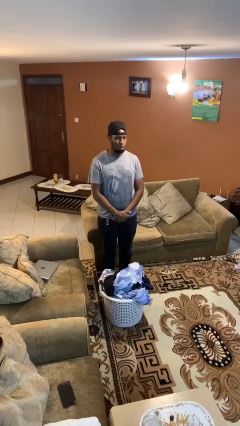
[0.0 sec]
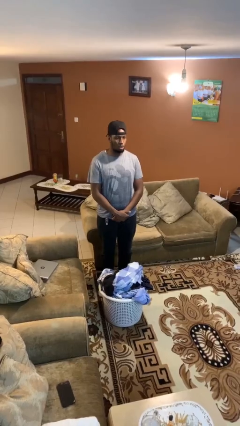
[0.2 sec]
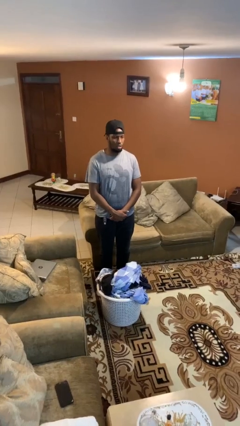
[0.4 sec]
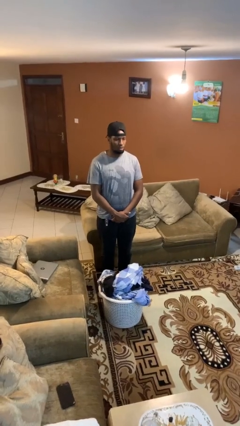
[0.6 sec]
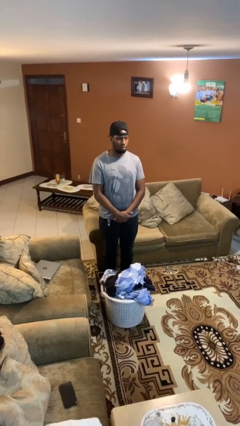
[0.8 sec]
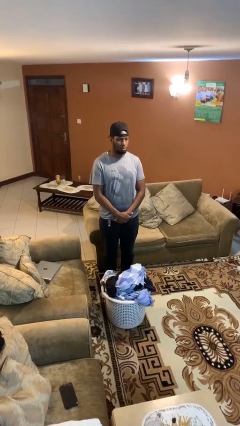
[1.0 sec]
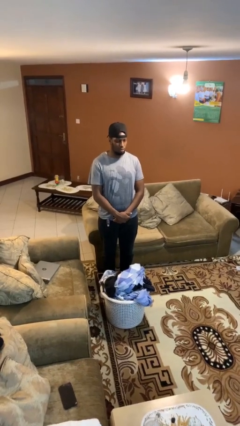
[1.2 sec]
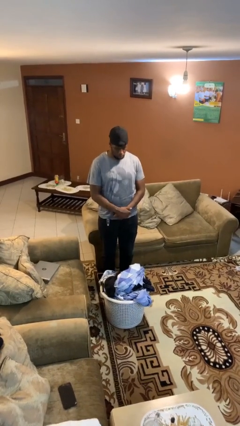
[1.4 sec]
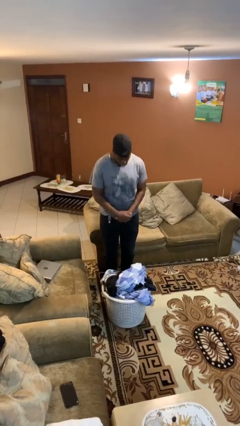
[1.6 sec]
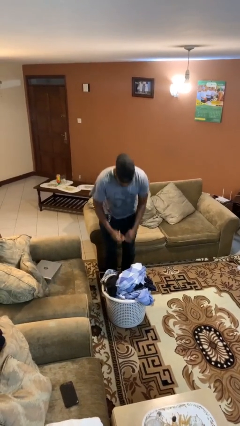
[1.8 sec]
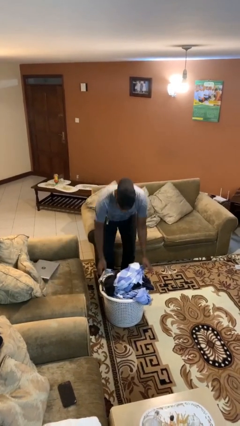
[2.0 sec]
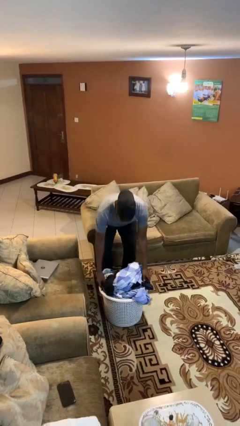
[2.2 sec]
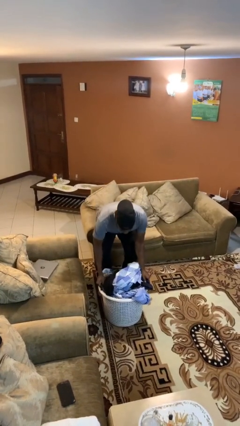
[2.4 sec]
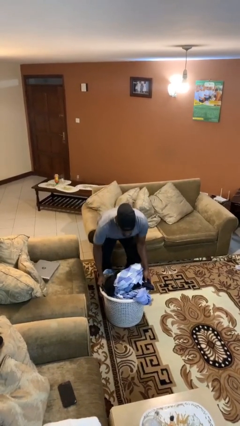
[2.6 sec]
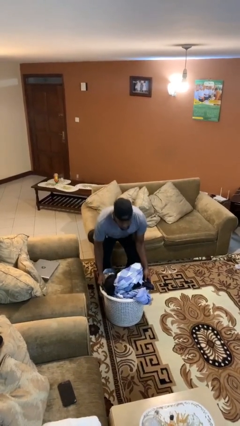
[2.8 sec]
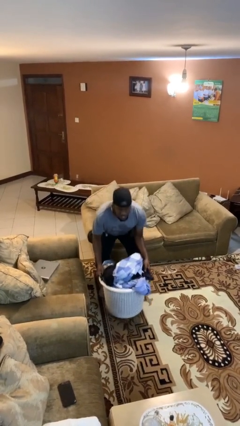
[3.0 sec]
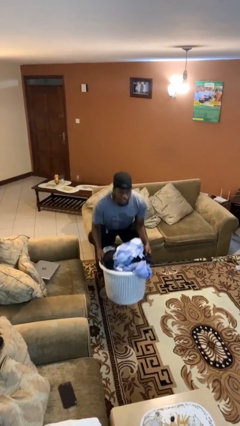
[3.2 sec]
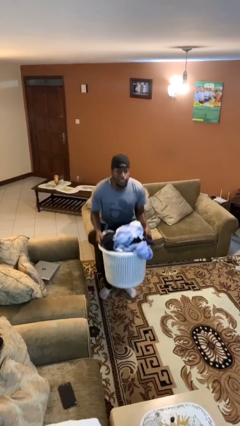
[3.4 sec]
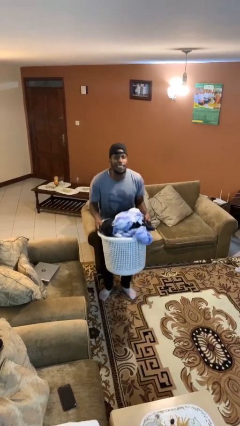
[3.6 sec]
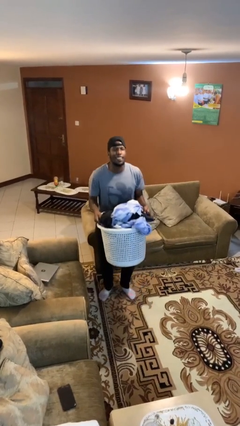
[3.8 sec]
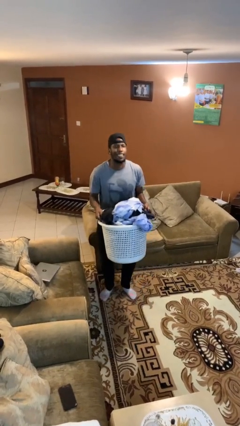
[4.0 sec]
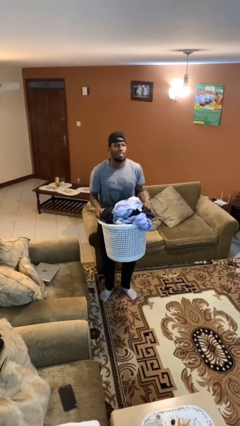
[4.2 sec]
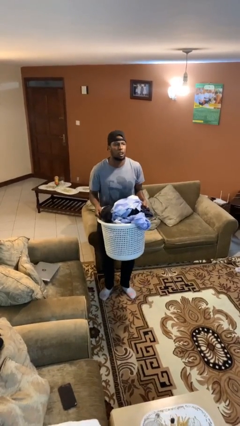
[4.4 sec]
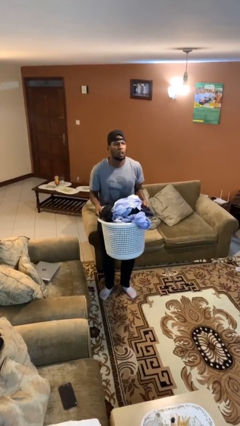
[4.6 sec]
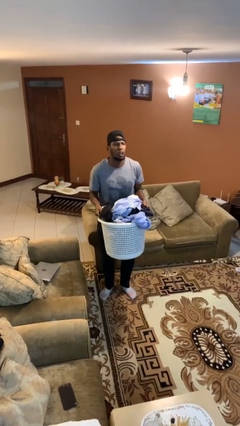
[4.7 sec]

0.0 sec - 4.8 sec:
person picks up object from floor

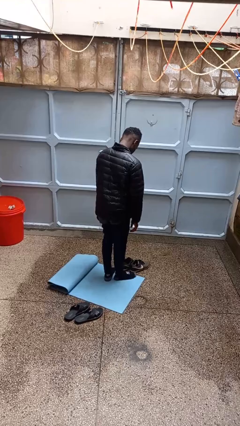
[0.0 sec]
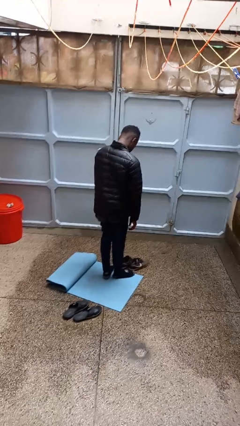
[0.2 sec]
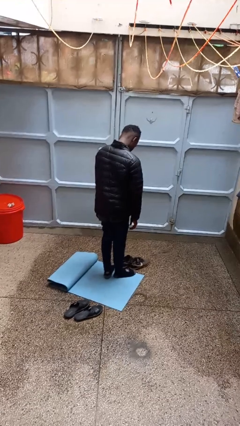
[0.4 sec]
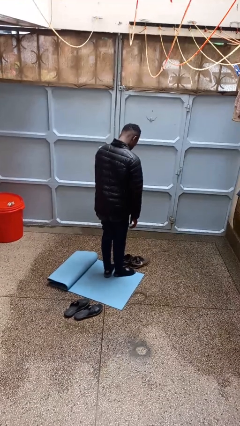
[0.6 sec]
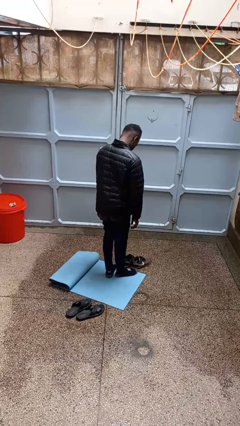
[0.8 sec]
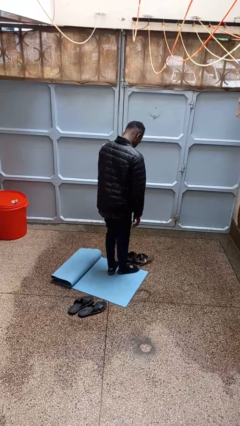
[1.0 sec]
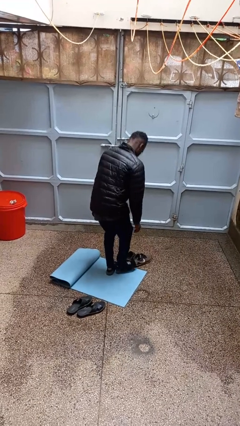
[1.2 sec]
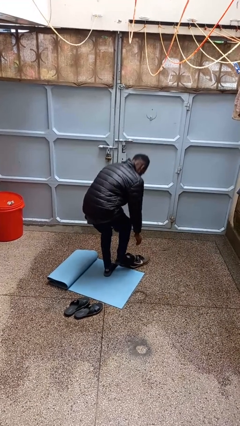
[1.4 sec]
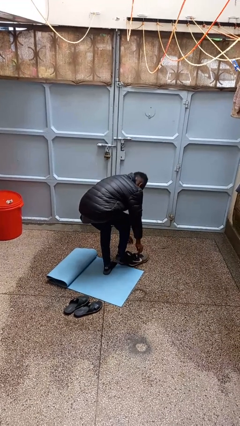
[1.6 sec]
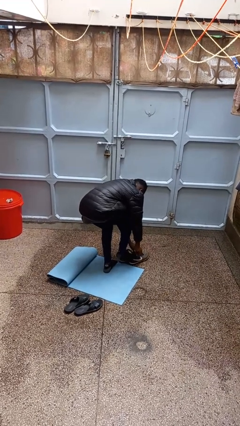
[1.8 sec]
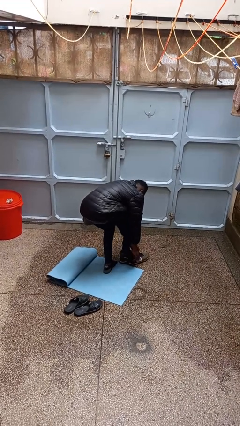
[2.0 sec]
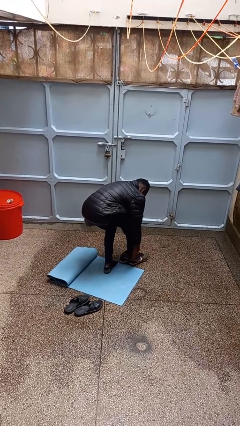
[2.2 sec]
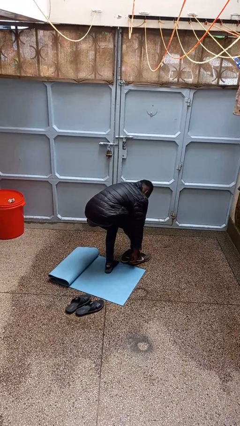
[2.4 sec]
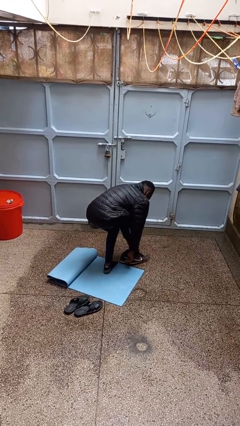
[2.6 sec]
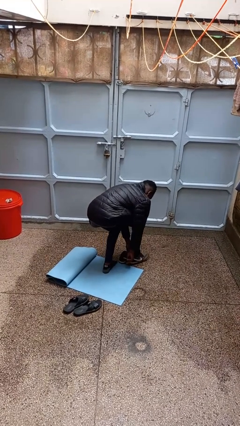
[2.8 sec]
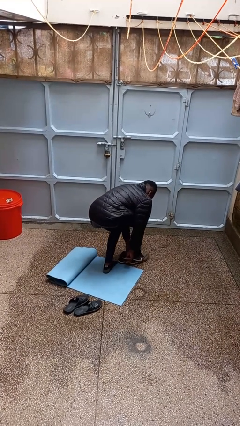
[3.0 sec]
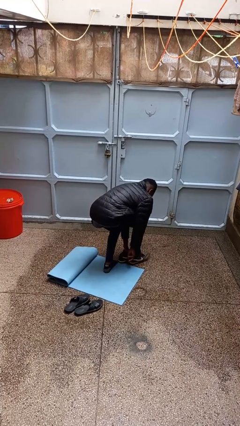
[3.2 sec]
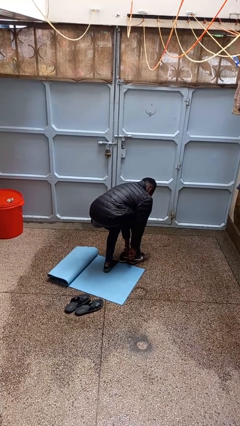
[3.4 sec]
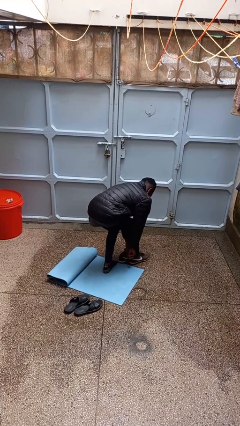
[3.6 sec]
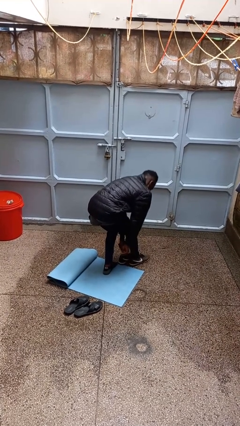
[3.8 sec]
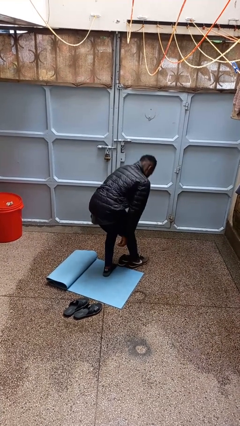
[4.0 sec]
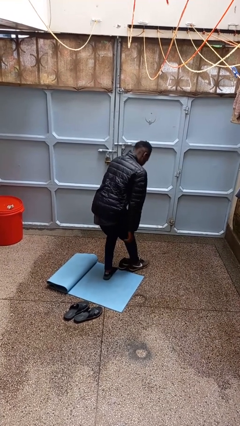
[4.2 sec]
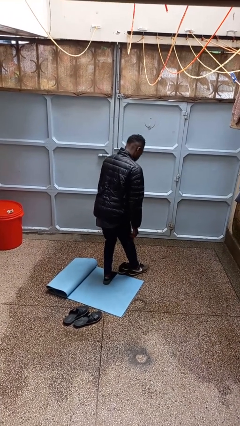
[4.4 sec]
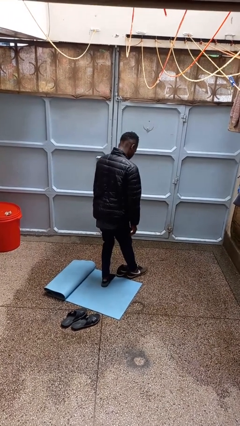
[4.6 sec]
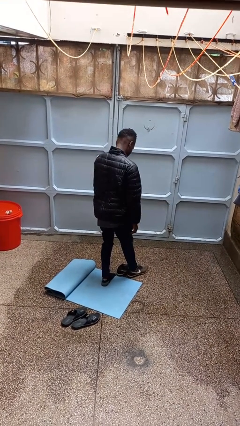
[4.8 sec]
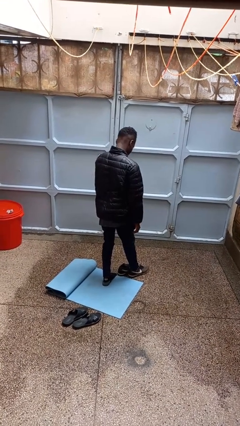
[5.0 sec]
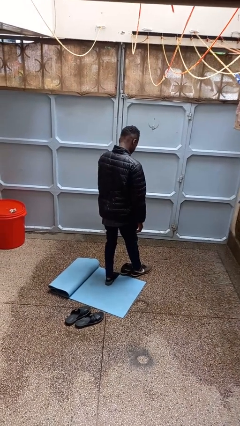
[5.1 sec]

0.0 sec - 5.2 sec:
person puts on shoes

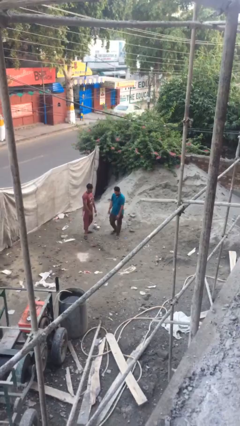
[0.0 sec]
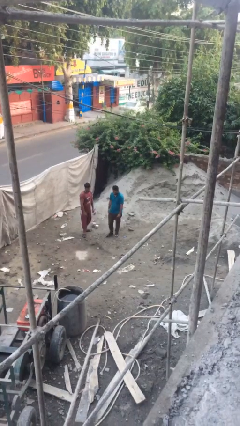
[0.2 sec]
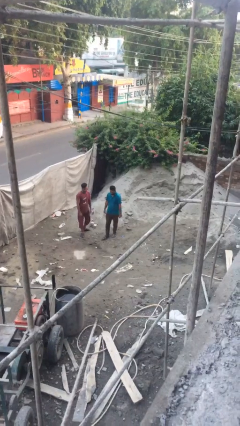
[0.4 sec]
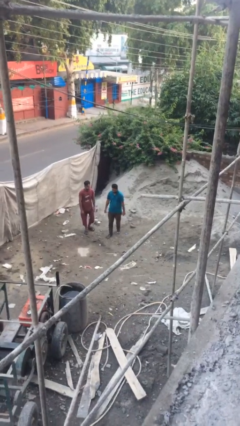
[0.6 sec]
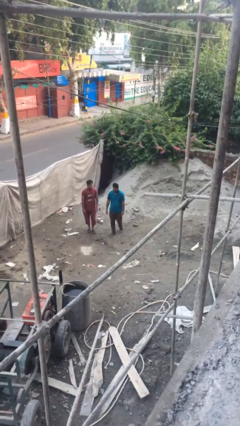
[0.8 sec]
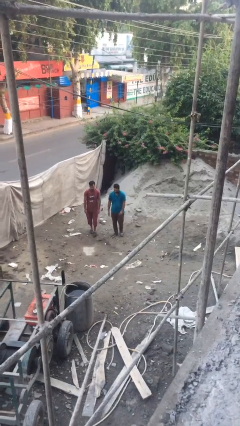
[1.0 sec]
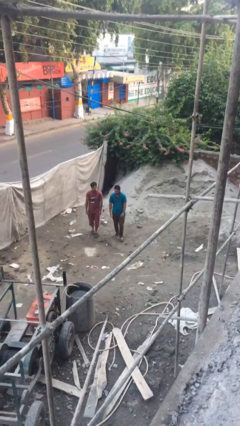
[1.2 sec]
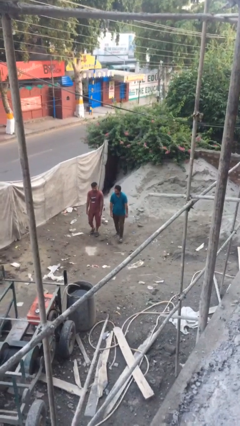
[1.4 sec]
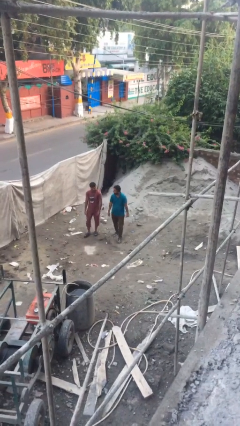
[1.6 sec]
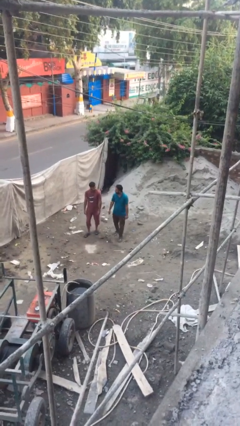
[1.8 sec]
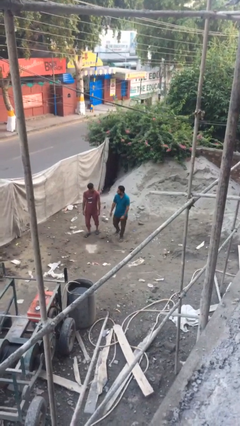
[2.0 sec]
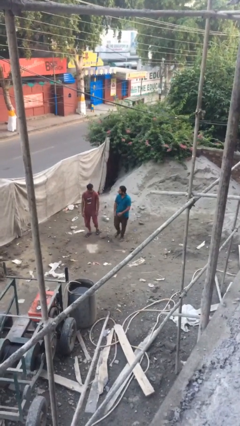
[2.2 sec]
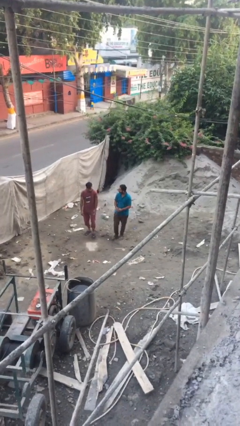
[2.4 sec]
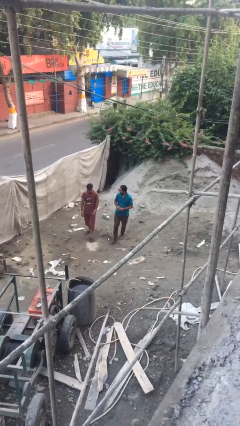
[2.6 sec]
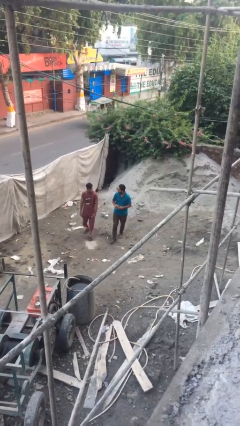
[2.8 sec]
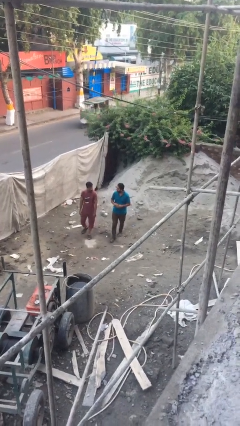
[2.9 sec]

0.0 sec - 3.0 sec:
person talks to person

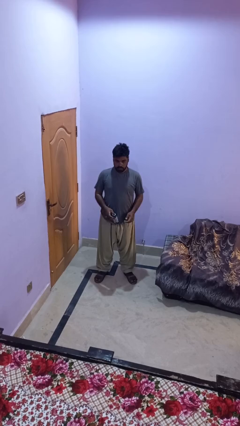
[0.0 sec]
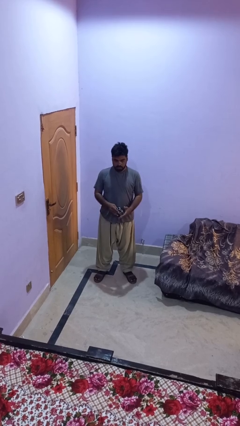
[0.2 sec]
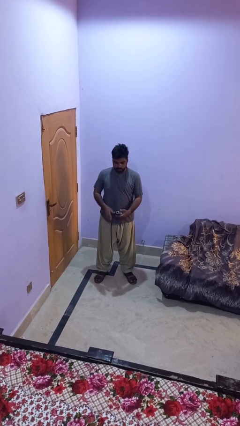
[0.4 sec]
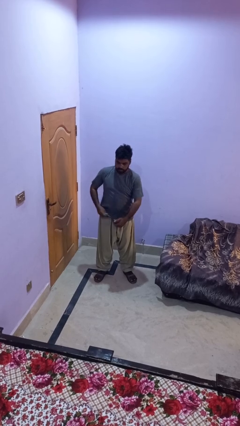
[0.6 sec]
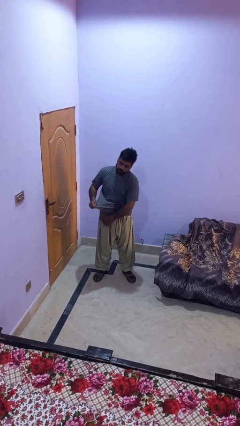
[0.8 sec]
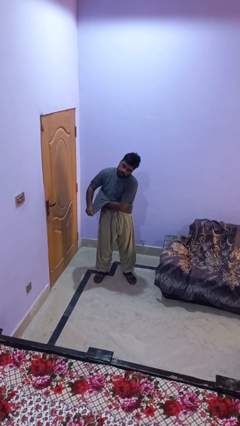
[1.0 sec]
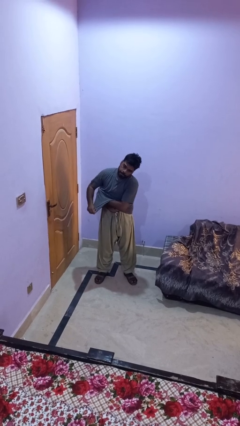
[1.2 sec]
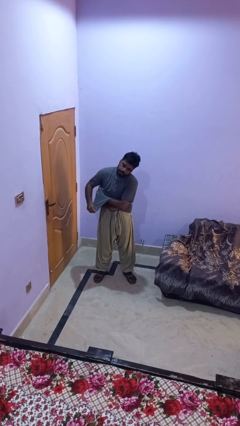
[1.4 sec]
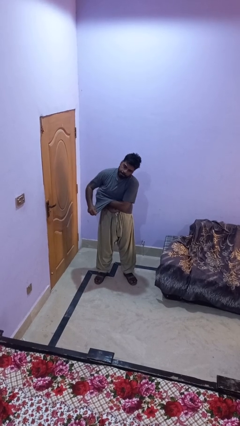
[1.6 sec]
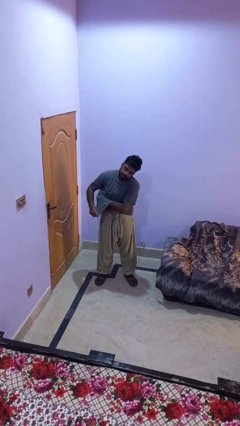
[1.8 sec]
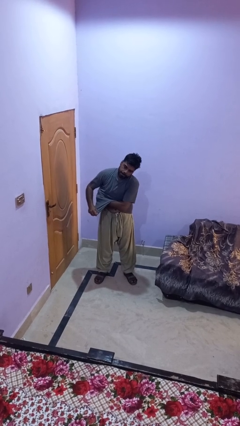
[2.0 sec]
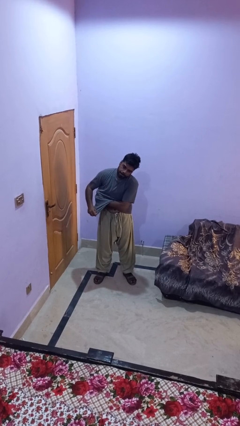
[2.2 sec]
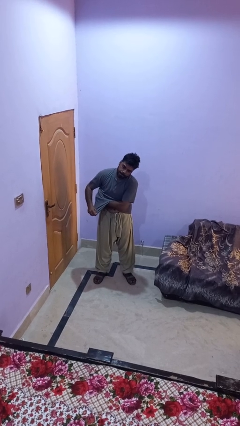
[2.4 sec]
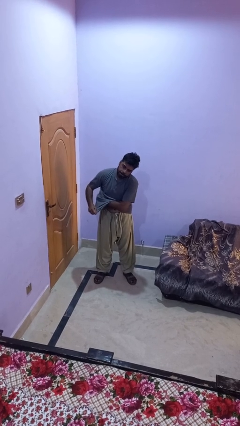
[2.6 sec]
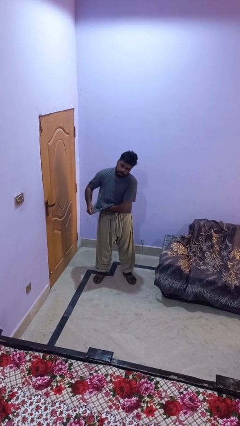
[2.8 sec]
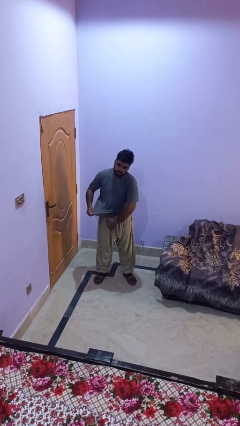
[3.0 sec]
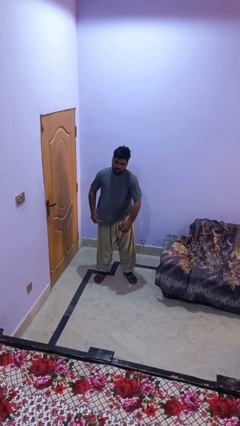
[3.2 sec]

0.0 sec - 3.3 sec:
person applies deodorant

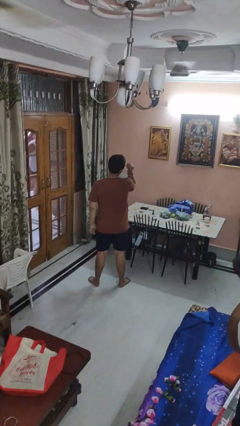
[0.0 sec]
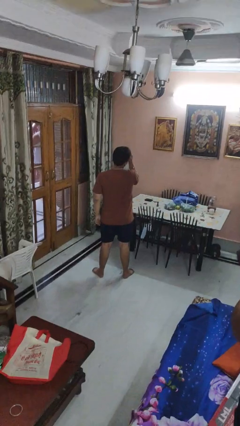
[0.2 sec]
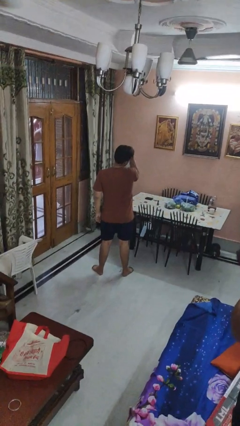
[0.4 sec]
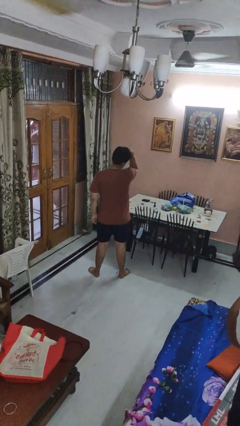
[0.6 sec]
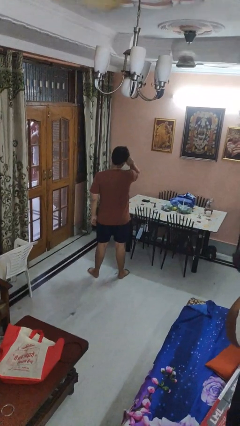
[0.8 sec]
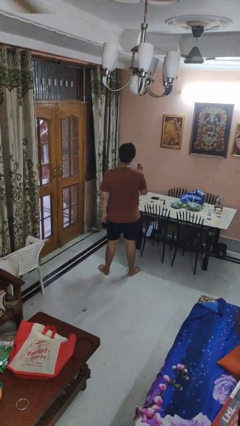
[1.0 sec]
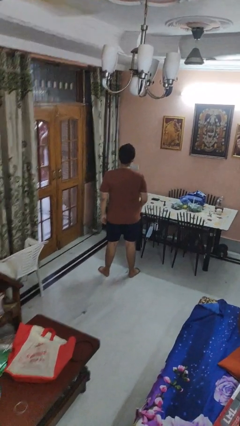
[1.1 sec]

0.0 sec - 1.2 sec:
person strokes hair
